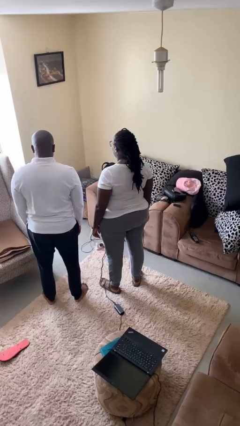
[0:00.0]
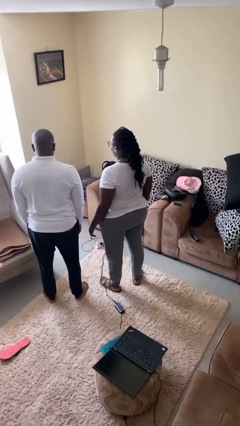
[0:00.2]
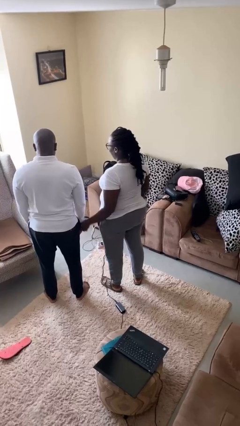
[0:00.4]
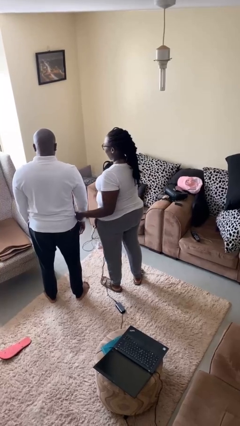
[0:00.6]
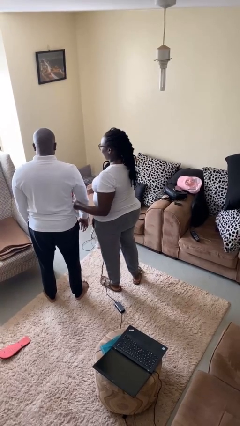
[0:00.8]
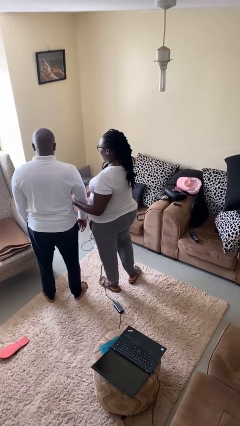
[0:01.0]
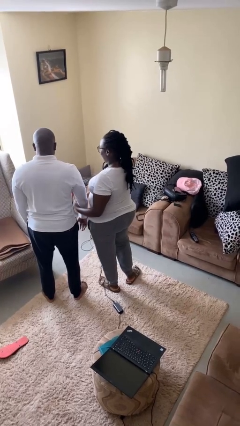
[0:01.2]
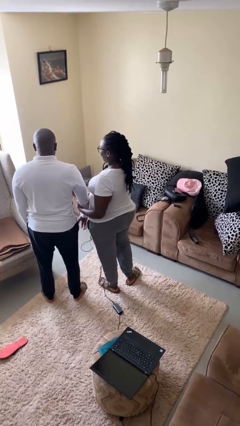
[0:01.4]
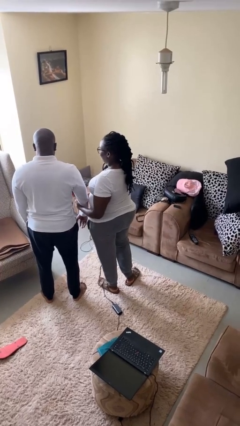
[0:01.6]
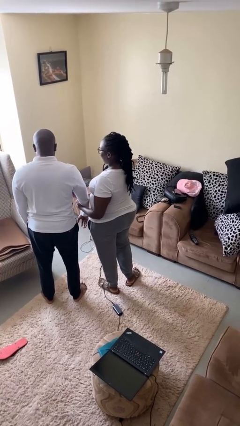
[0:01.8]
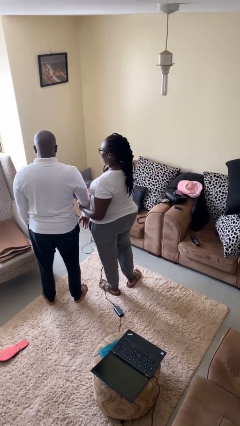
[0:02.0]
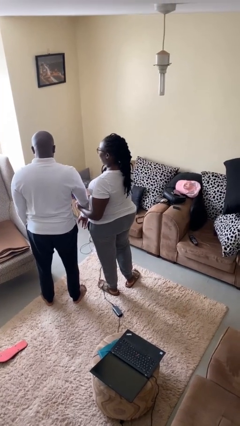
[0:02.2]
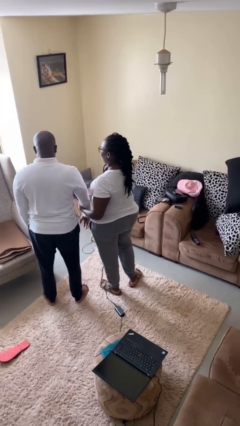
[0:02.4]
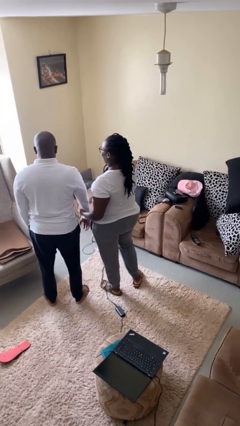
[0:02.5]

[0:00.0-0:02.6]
person grabs person by forearm

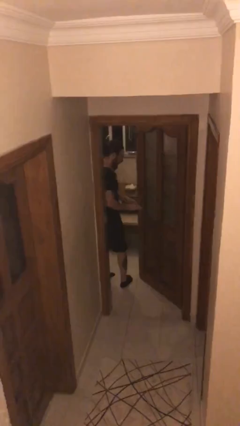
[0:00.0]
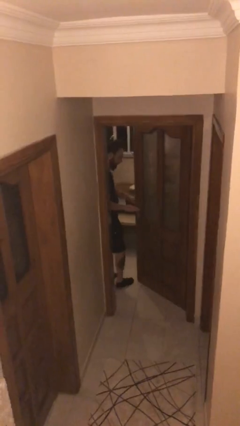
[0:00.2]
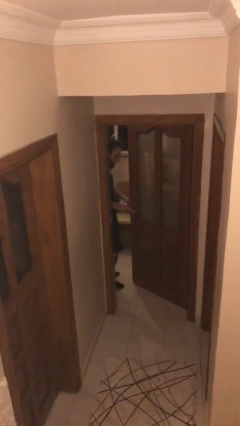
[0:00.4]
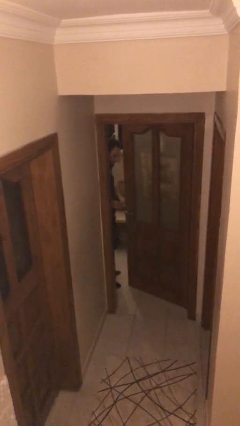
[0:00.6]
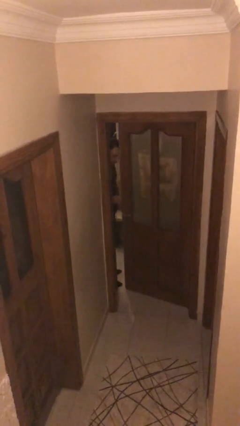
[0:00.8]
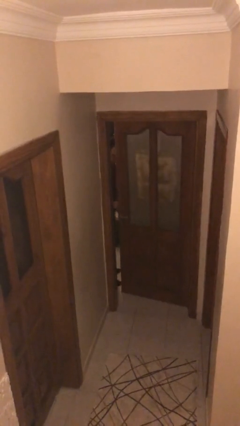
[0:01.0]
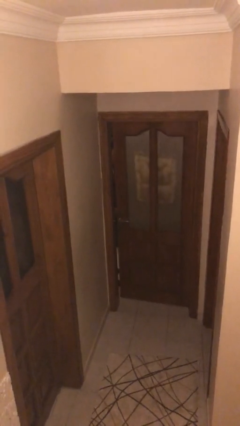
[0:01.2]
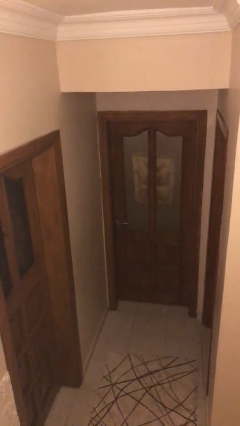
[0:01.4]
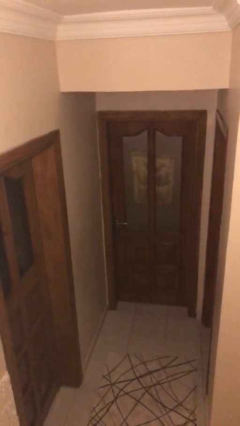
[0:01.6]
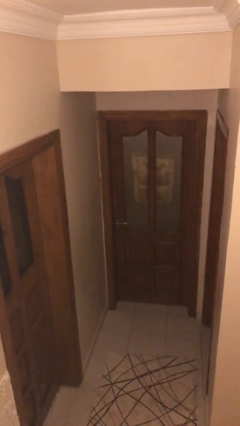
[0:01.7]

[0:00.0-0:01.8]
person closes facility door

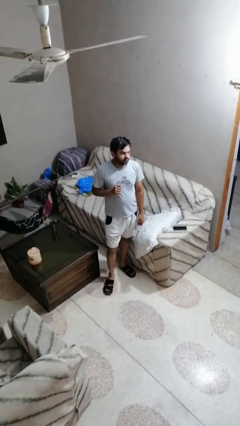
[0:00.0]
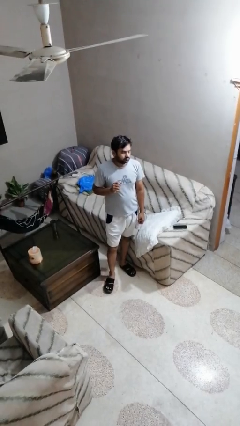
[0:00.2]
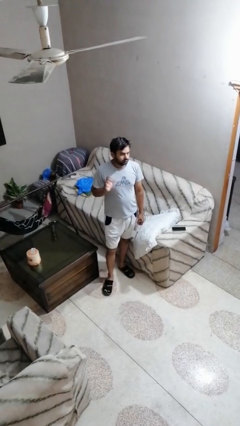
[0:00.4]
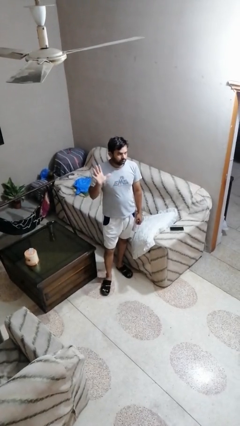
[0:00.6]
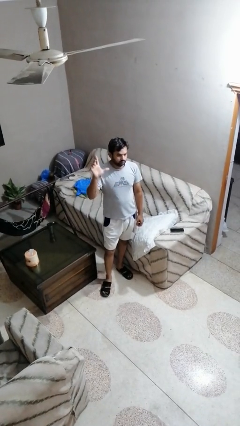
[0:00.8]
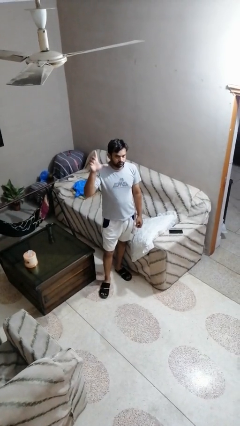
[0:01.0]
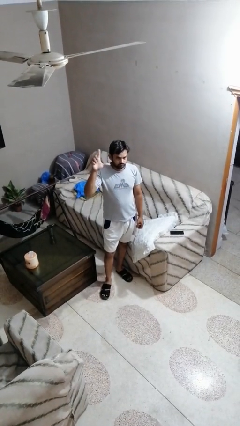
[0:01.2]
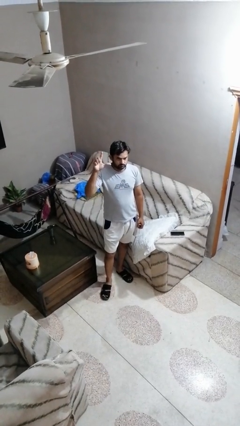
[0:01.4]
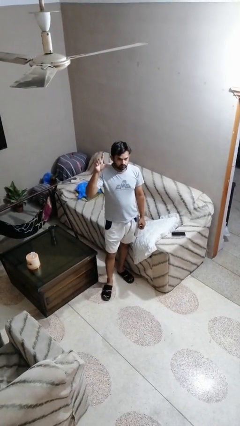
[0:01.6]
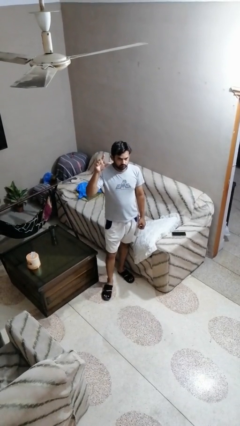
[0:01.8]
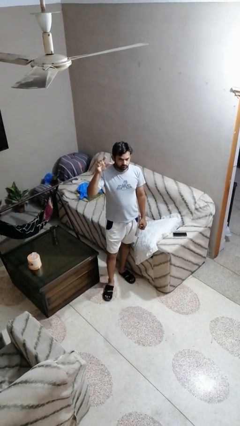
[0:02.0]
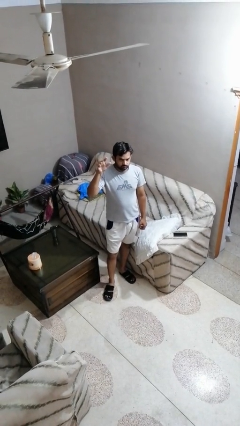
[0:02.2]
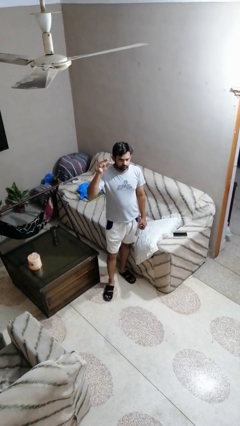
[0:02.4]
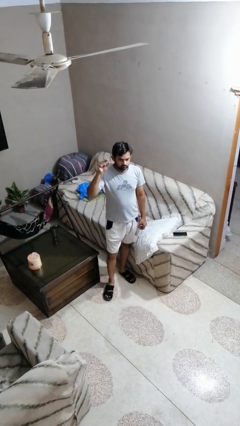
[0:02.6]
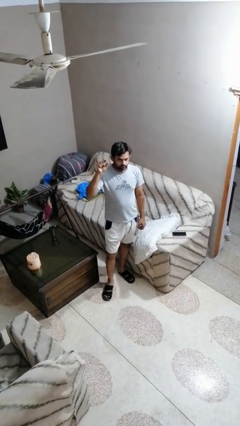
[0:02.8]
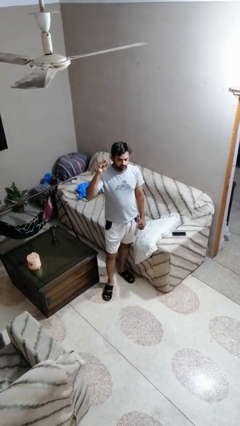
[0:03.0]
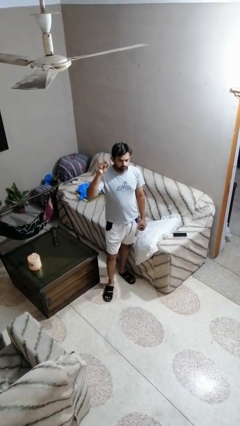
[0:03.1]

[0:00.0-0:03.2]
person gestures zoom in

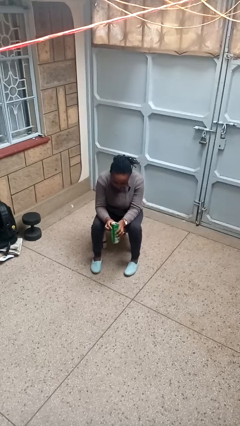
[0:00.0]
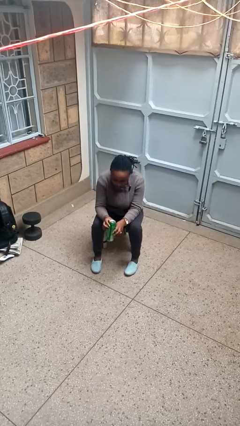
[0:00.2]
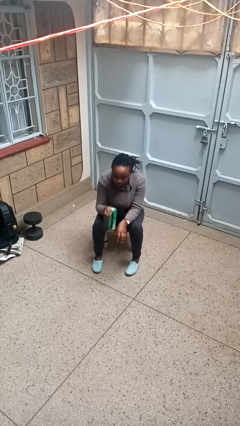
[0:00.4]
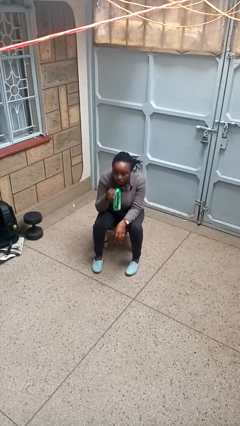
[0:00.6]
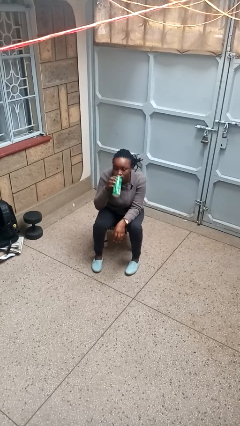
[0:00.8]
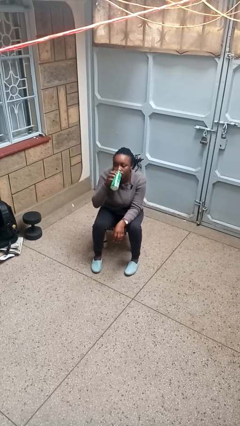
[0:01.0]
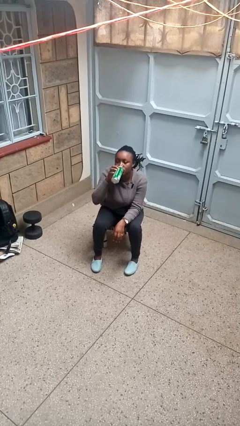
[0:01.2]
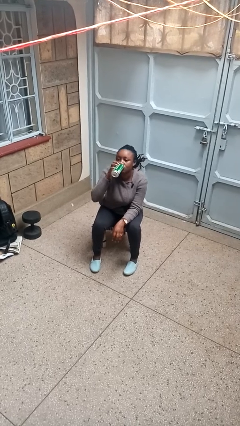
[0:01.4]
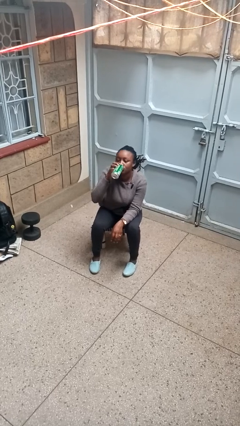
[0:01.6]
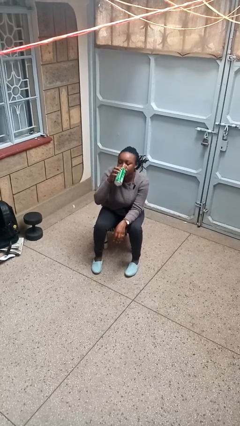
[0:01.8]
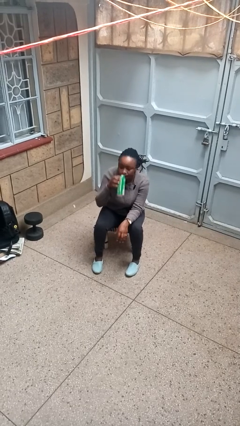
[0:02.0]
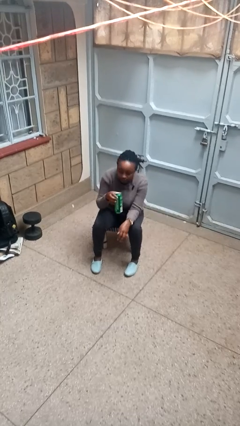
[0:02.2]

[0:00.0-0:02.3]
person drinks from beverage can

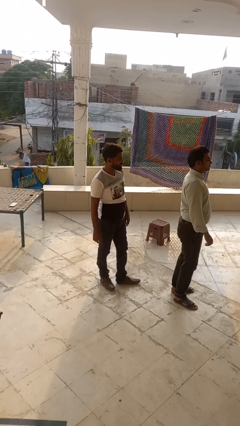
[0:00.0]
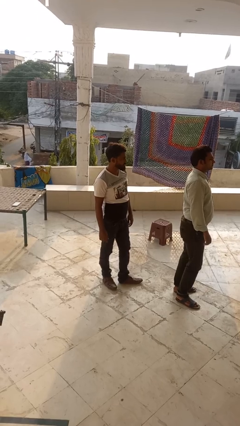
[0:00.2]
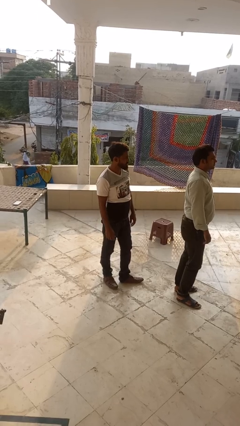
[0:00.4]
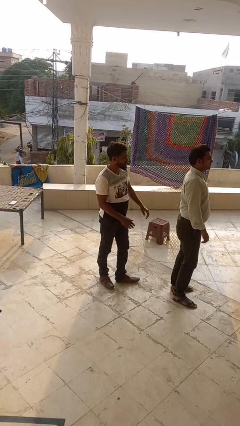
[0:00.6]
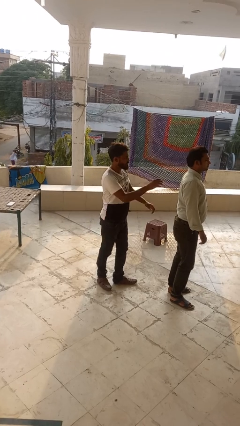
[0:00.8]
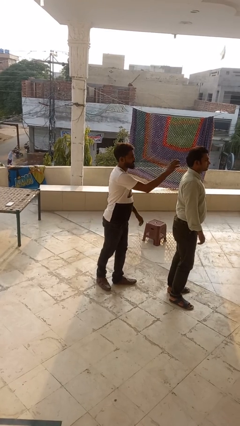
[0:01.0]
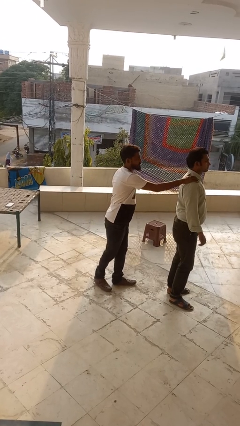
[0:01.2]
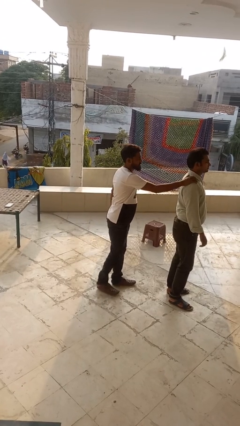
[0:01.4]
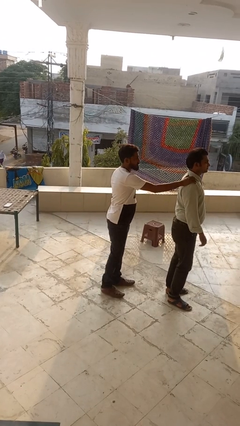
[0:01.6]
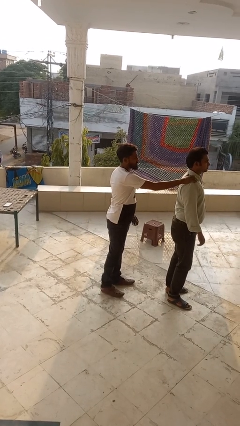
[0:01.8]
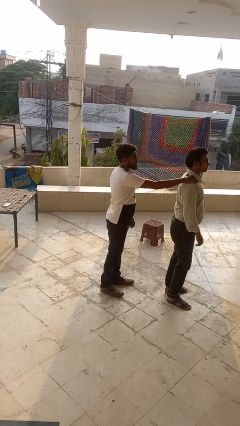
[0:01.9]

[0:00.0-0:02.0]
person grabs person by shoulder

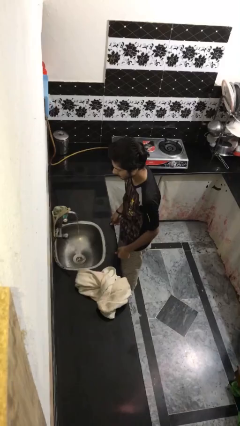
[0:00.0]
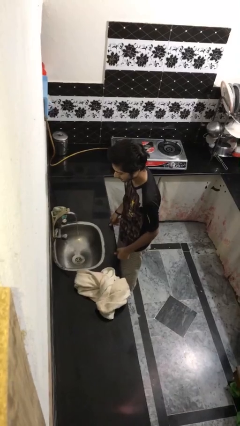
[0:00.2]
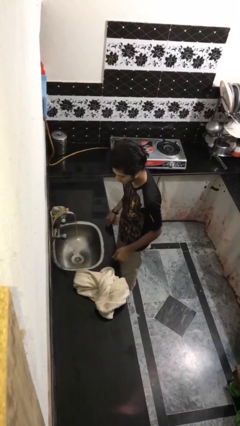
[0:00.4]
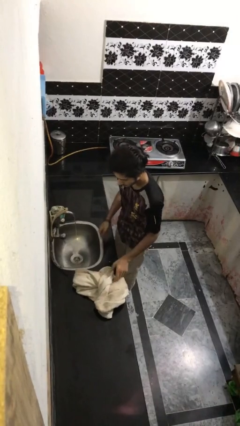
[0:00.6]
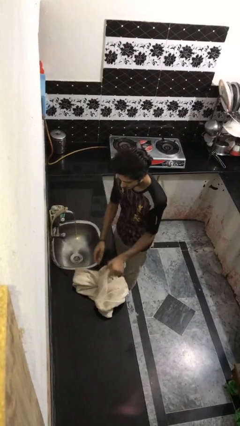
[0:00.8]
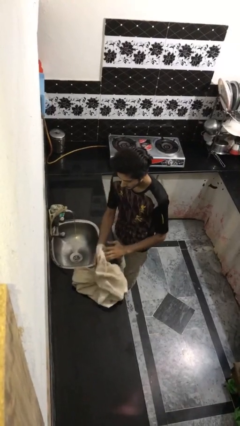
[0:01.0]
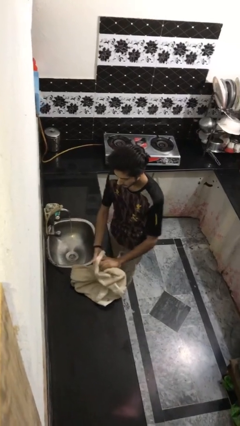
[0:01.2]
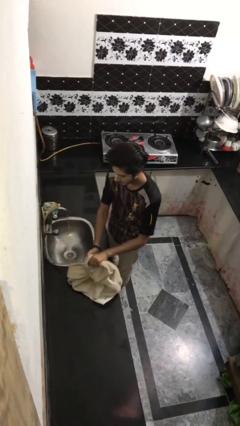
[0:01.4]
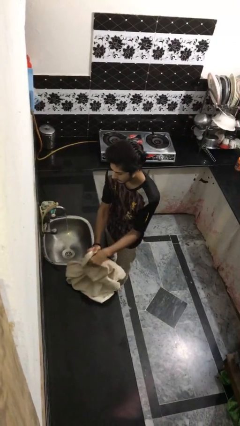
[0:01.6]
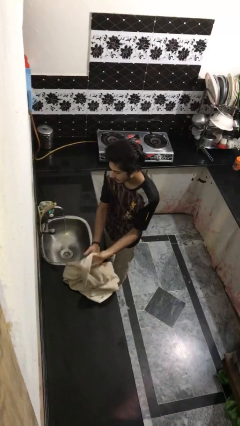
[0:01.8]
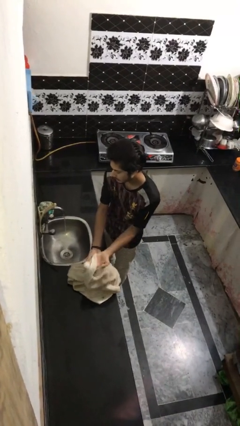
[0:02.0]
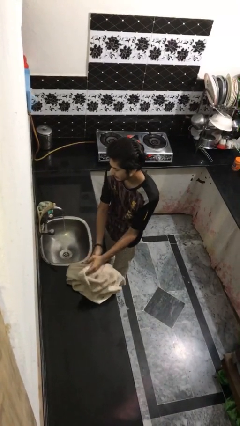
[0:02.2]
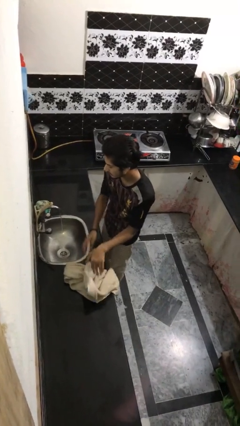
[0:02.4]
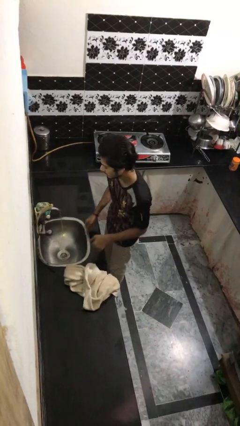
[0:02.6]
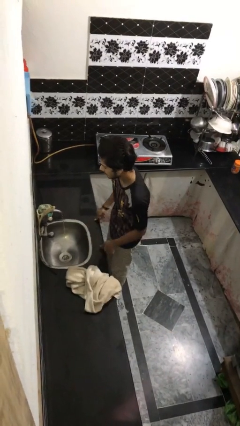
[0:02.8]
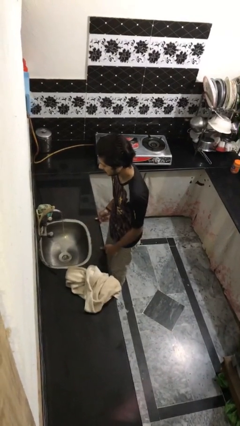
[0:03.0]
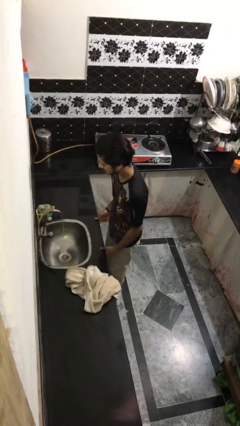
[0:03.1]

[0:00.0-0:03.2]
person dries face with towel

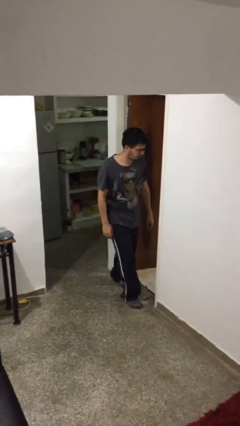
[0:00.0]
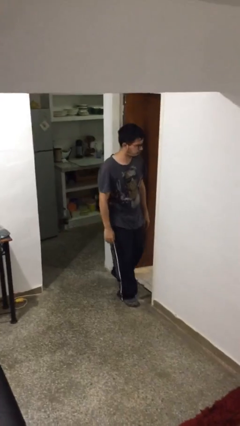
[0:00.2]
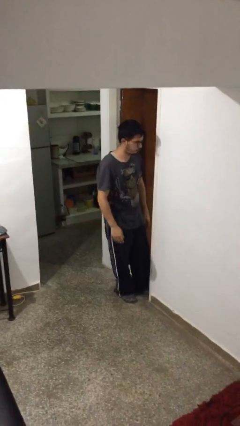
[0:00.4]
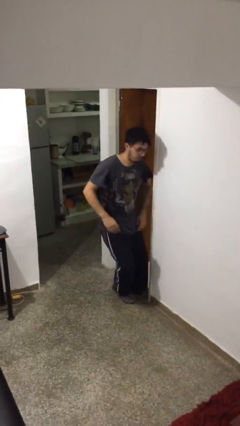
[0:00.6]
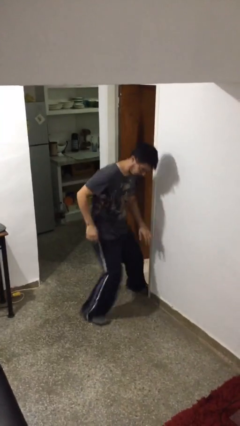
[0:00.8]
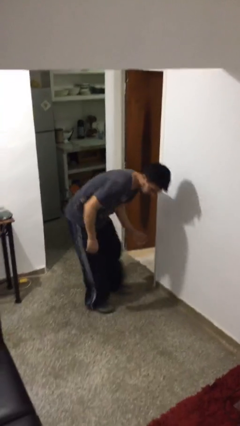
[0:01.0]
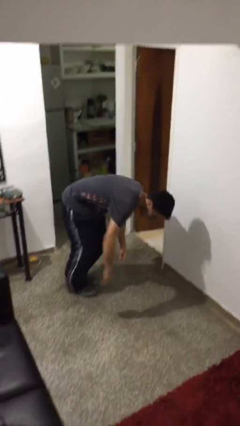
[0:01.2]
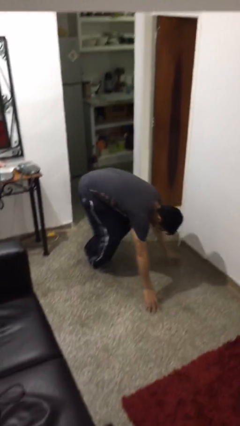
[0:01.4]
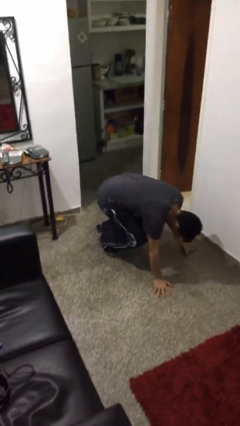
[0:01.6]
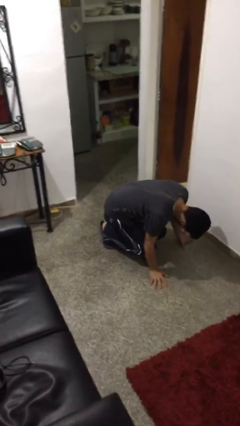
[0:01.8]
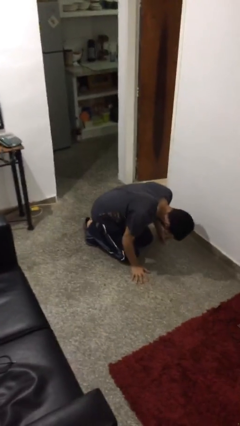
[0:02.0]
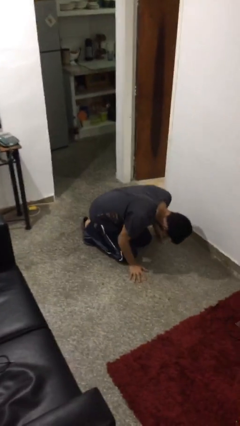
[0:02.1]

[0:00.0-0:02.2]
person trips on object on floor

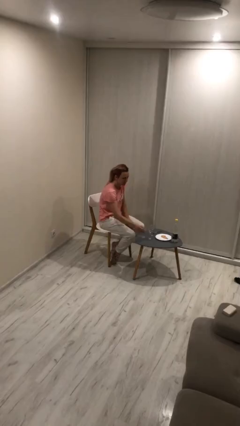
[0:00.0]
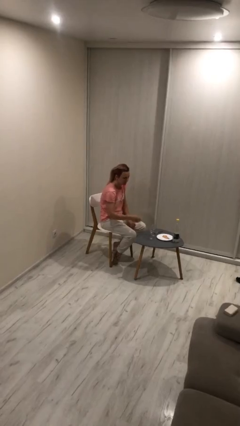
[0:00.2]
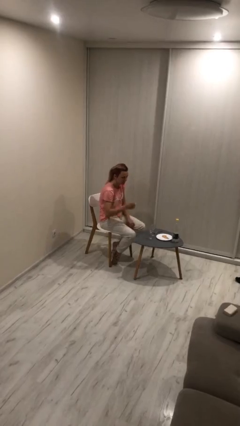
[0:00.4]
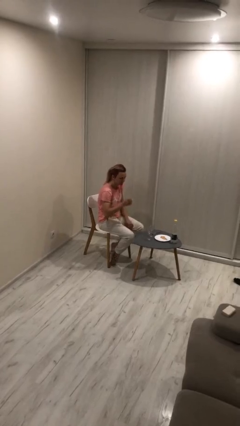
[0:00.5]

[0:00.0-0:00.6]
person picks up object from table
